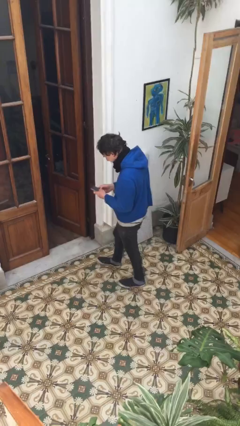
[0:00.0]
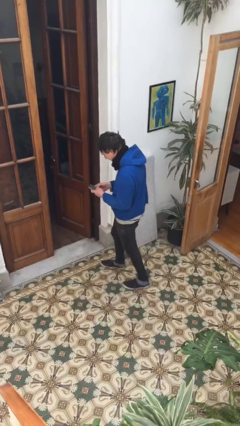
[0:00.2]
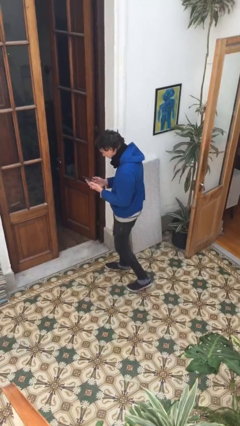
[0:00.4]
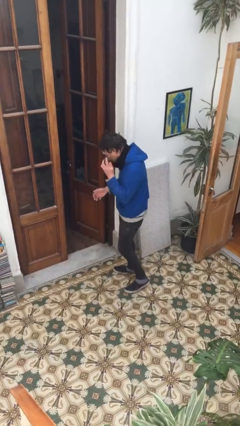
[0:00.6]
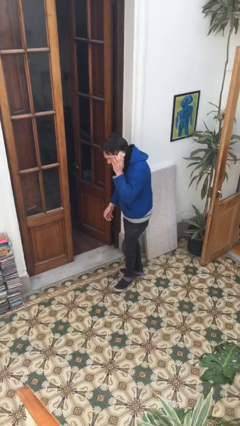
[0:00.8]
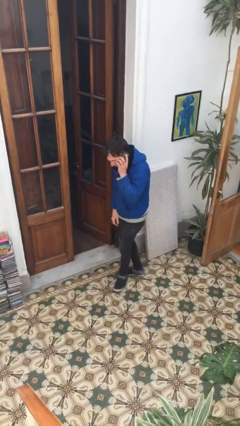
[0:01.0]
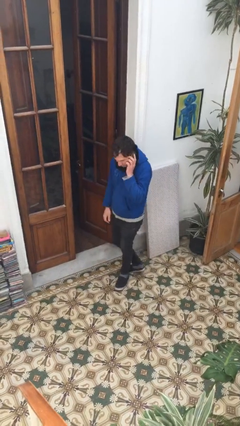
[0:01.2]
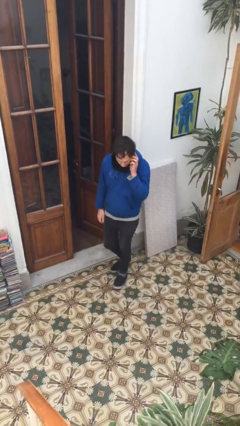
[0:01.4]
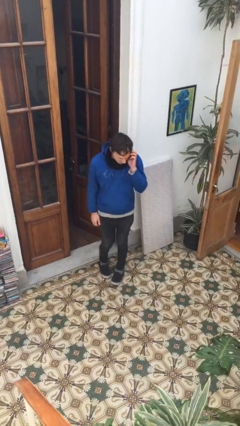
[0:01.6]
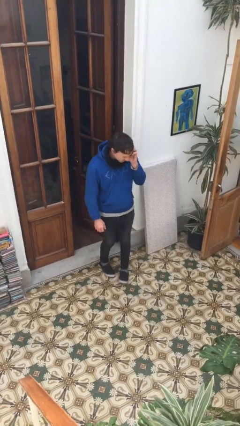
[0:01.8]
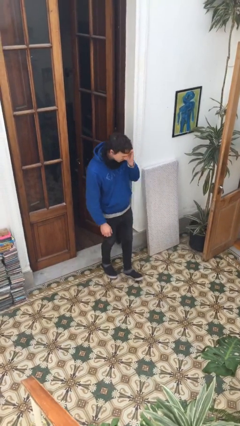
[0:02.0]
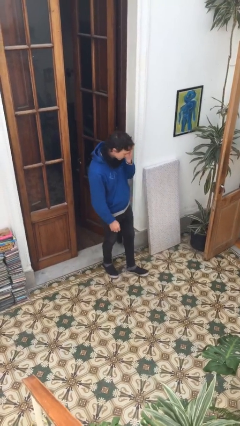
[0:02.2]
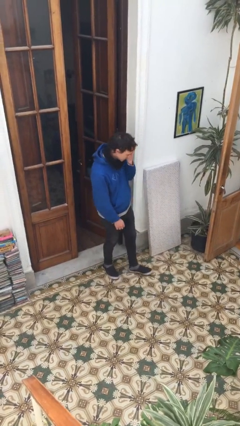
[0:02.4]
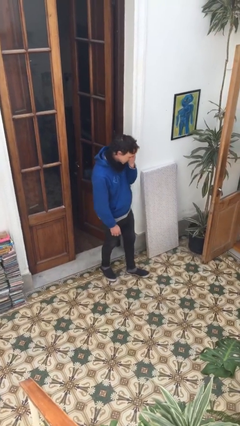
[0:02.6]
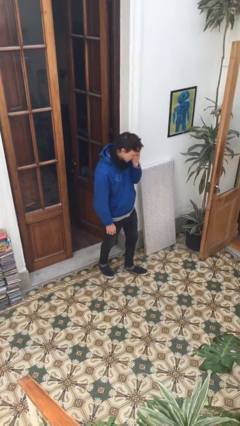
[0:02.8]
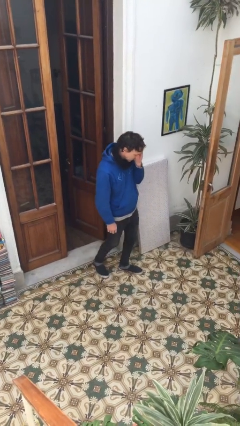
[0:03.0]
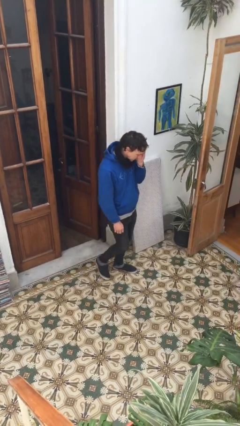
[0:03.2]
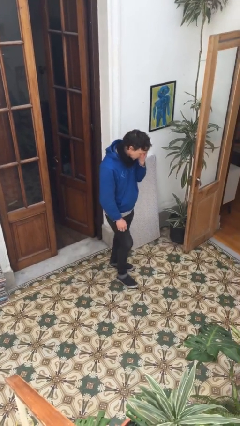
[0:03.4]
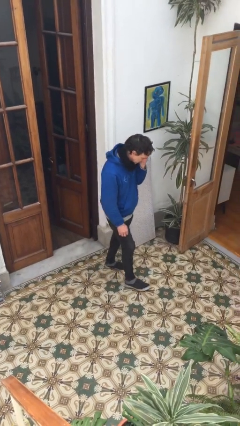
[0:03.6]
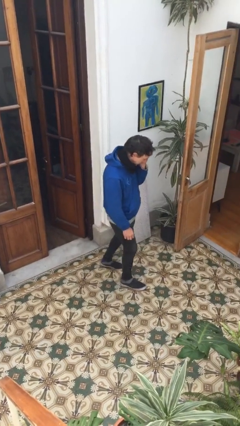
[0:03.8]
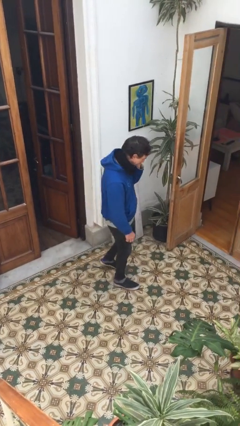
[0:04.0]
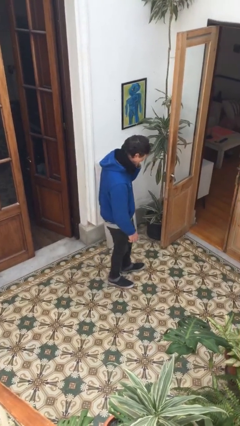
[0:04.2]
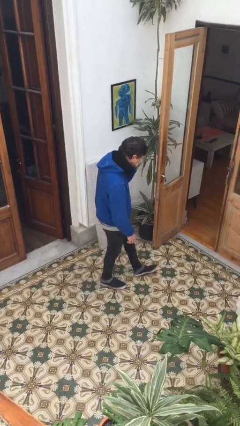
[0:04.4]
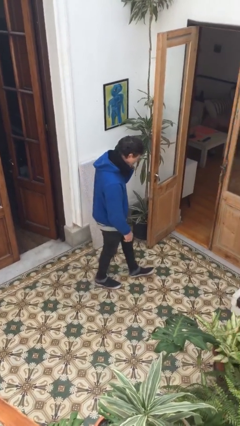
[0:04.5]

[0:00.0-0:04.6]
person talks on phone

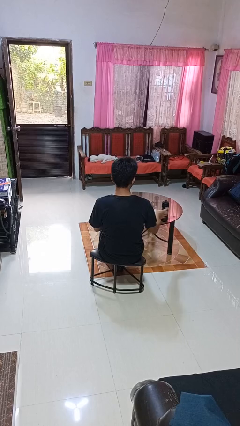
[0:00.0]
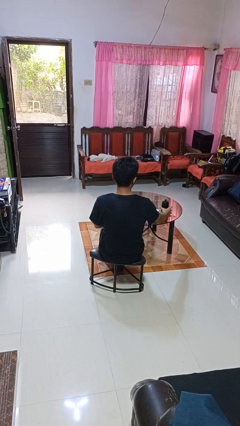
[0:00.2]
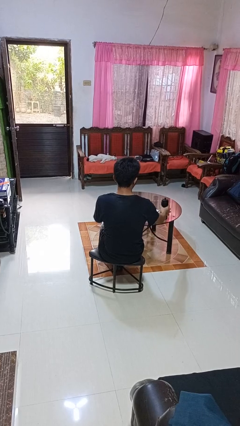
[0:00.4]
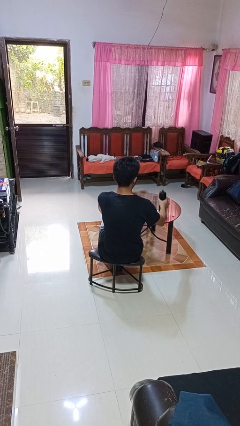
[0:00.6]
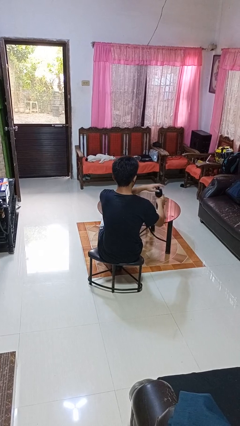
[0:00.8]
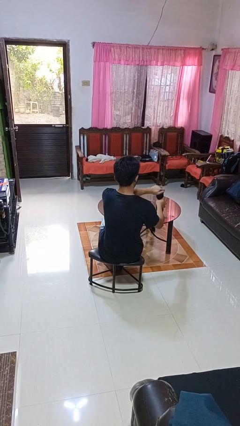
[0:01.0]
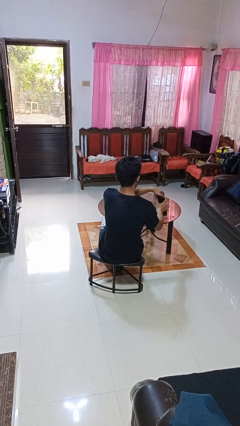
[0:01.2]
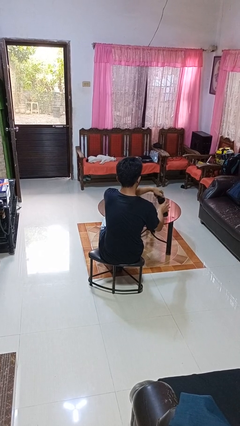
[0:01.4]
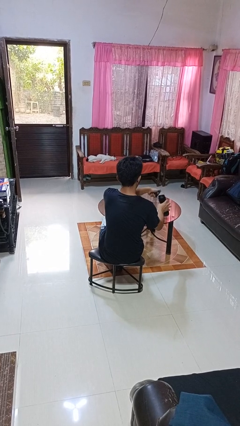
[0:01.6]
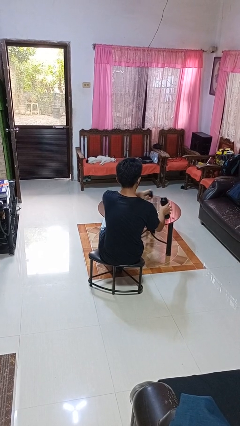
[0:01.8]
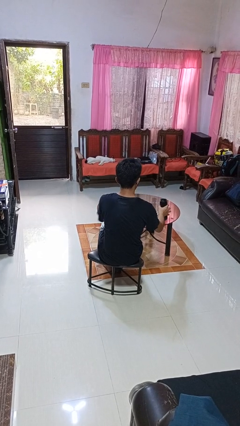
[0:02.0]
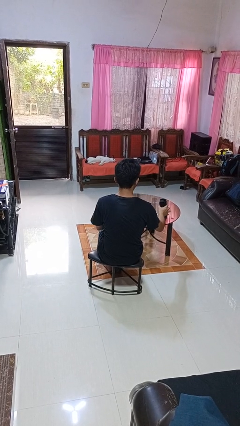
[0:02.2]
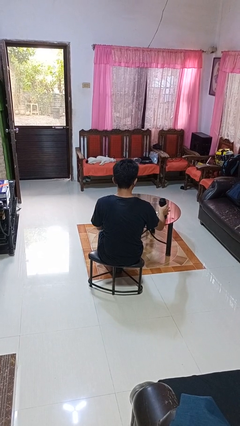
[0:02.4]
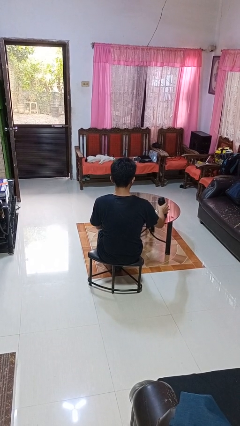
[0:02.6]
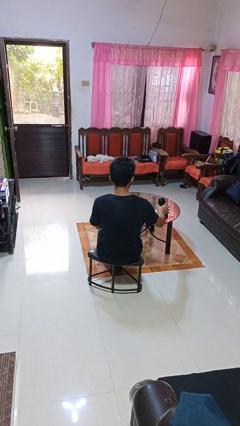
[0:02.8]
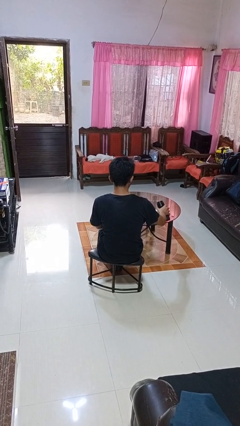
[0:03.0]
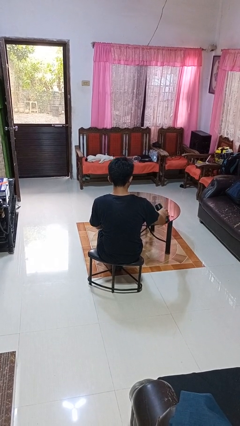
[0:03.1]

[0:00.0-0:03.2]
person unscrews lid from bottle

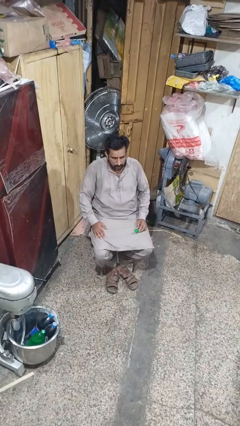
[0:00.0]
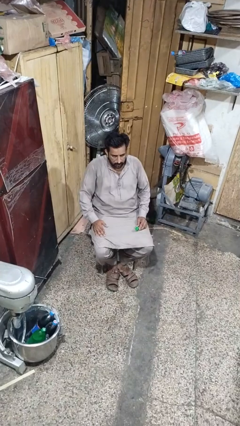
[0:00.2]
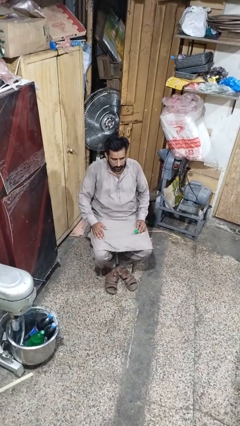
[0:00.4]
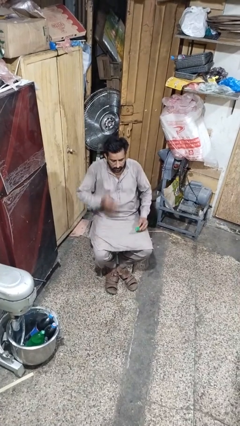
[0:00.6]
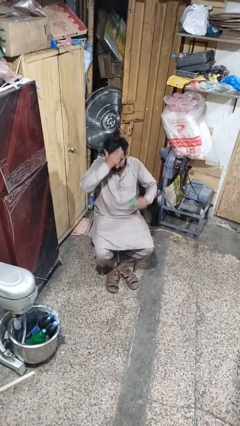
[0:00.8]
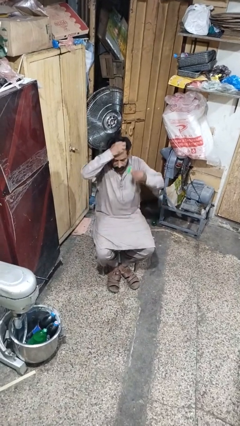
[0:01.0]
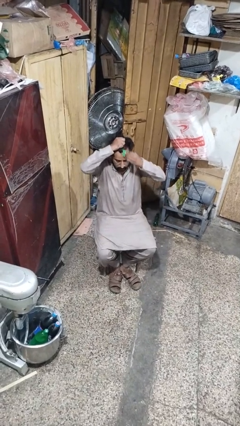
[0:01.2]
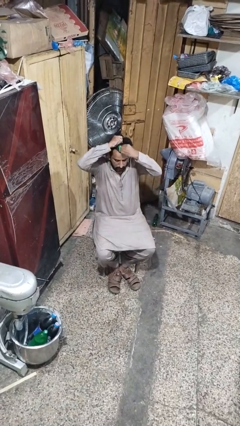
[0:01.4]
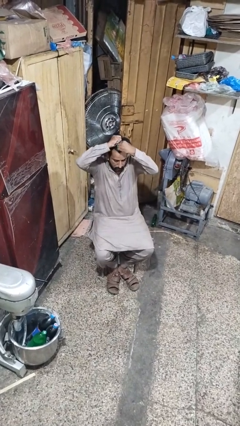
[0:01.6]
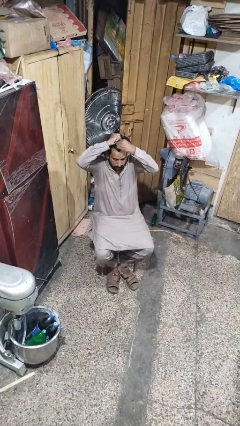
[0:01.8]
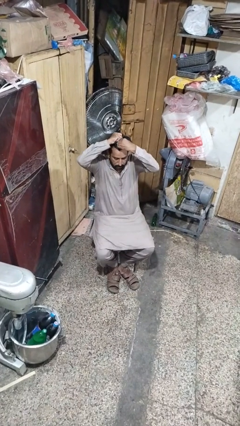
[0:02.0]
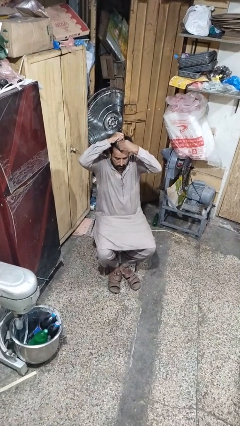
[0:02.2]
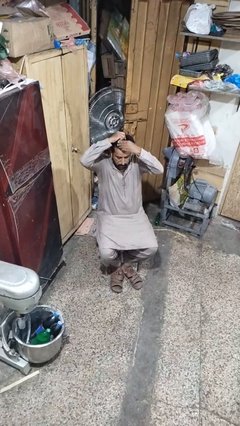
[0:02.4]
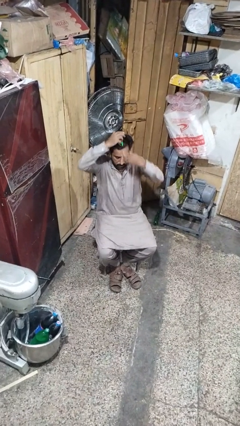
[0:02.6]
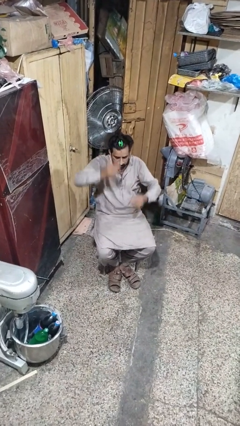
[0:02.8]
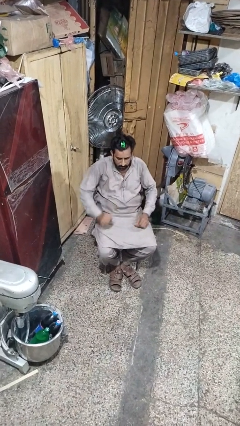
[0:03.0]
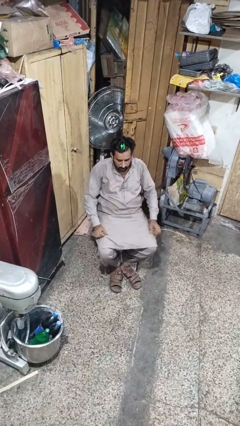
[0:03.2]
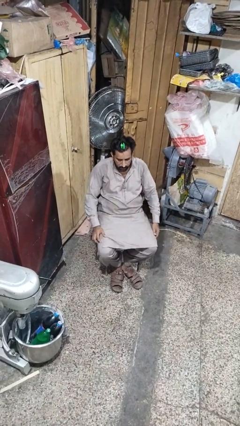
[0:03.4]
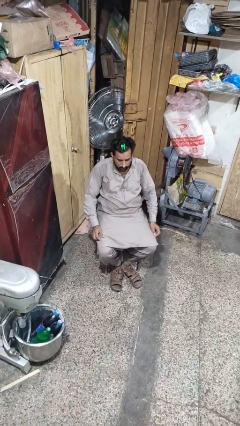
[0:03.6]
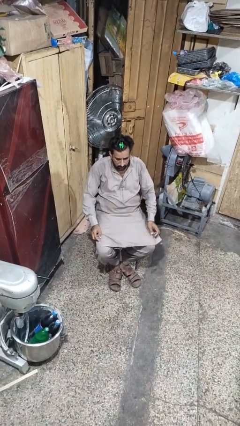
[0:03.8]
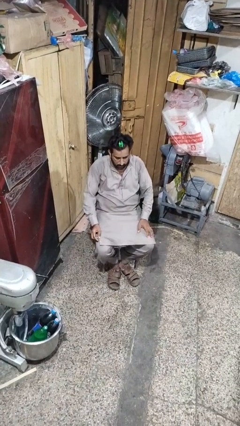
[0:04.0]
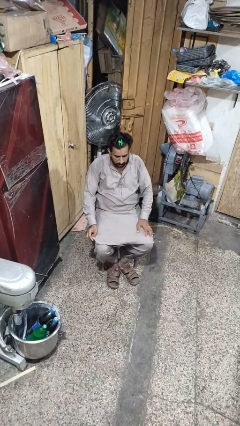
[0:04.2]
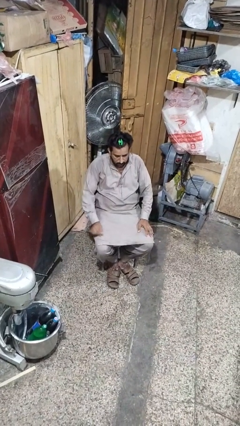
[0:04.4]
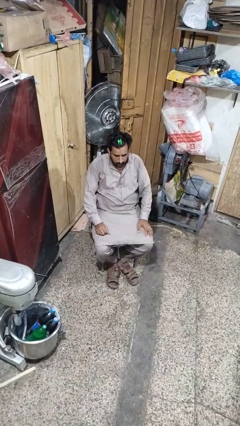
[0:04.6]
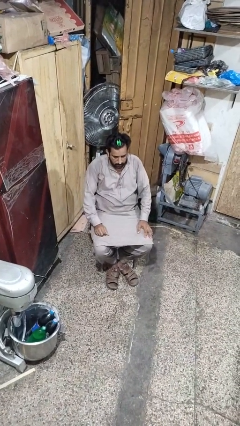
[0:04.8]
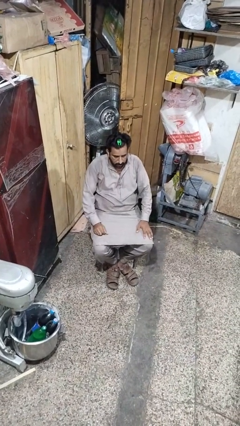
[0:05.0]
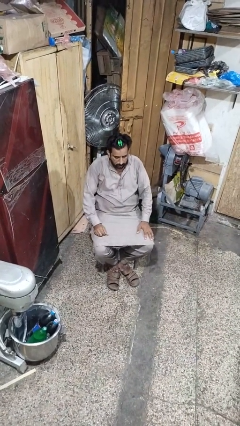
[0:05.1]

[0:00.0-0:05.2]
person puts hair in ponytail

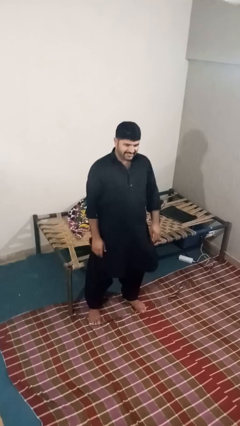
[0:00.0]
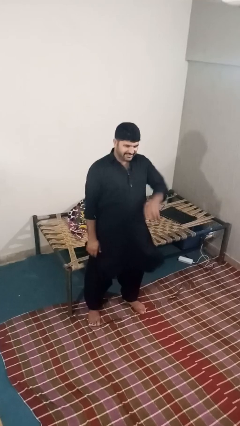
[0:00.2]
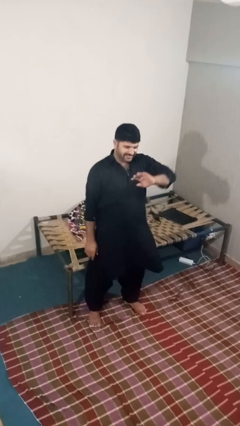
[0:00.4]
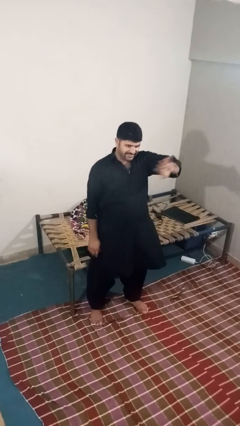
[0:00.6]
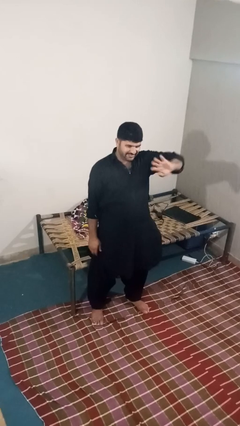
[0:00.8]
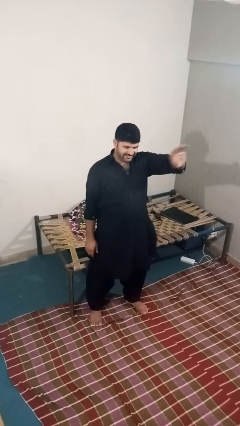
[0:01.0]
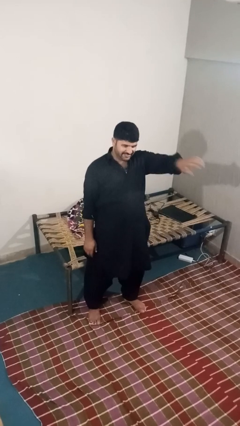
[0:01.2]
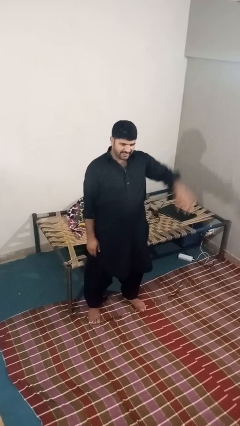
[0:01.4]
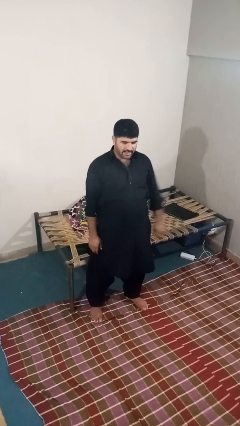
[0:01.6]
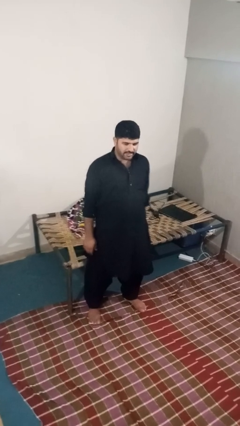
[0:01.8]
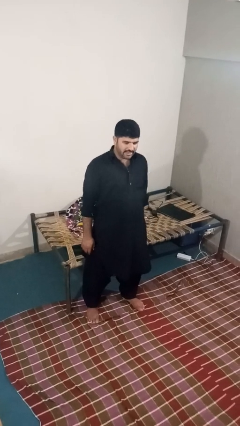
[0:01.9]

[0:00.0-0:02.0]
person gestures swipe left

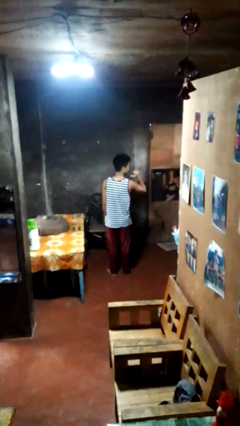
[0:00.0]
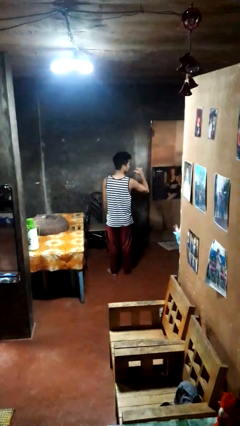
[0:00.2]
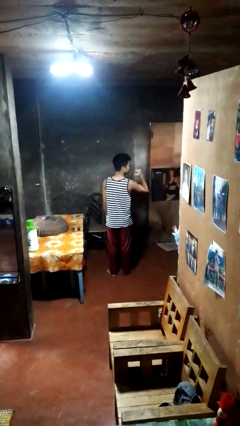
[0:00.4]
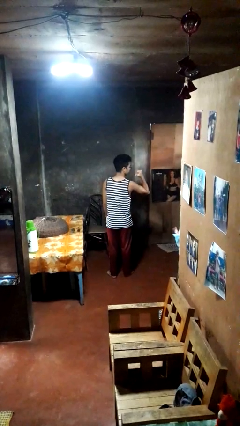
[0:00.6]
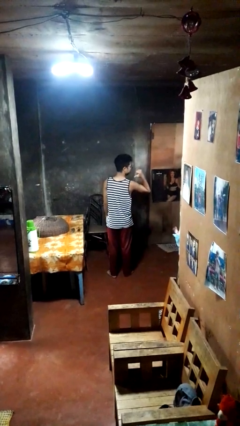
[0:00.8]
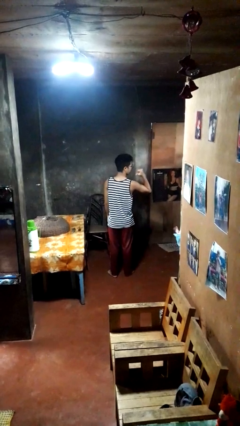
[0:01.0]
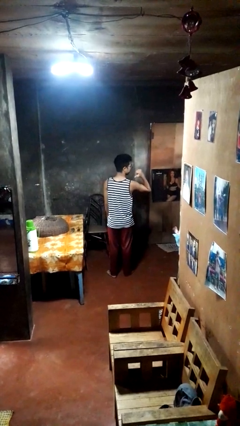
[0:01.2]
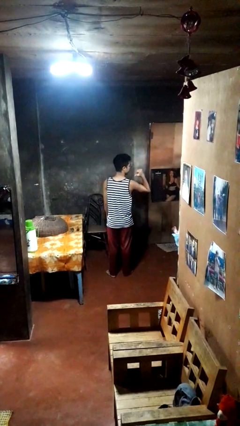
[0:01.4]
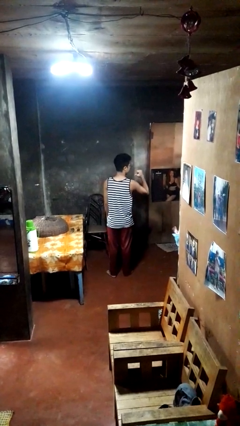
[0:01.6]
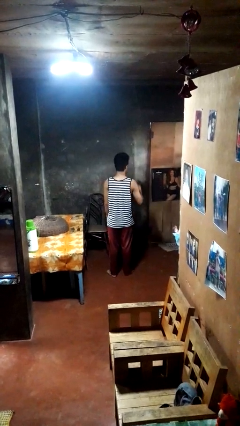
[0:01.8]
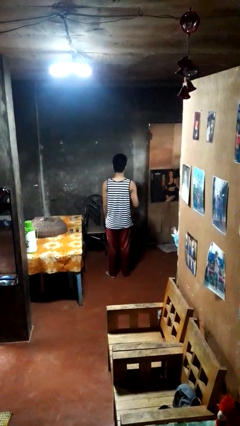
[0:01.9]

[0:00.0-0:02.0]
person gestures behind me

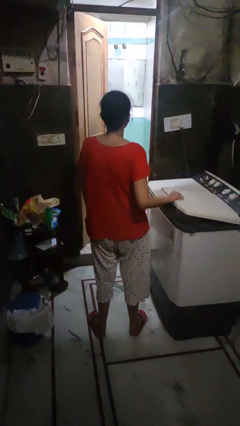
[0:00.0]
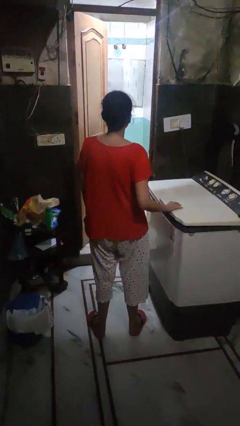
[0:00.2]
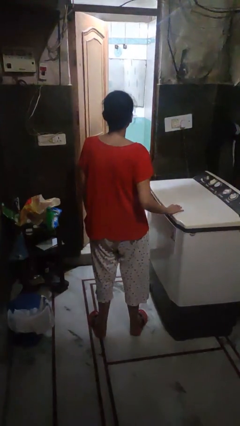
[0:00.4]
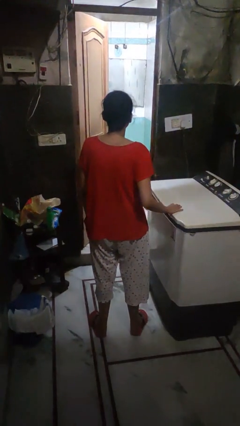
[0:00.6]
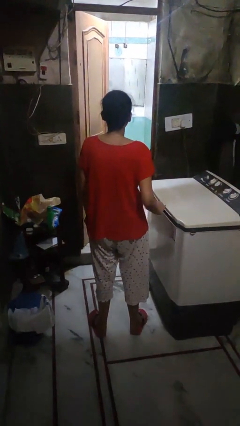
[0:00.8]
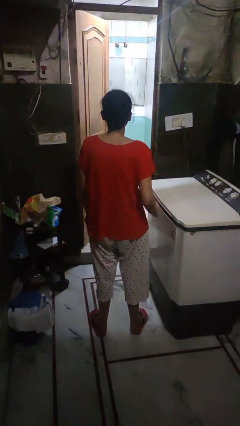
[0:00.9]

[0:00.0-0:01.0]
person closes clothes washer
